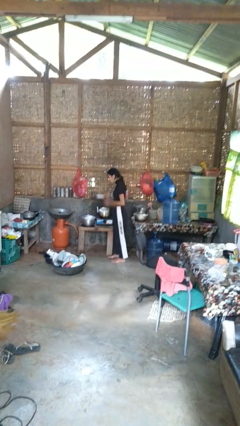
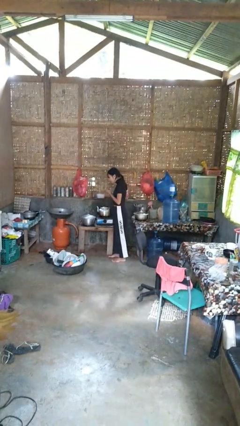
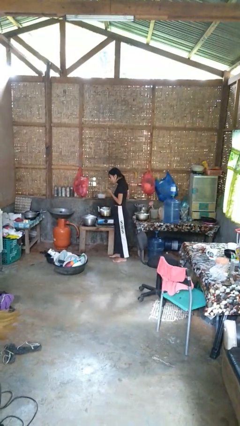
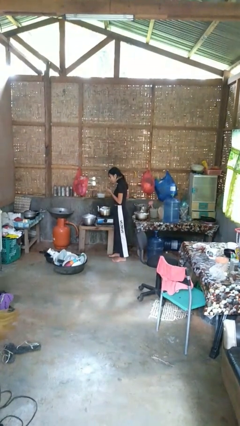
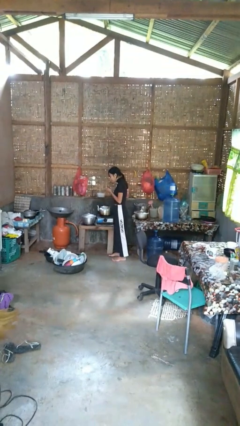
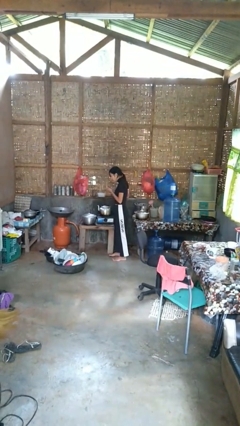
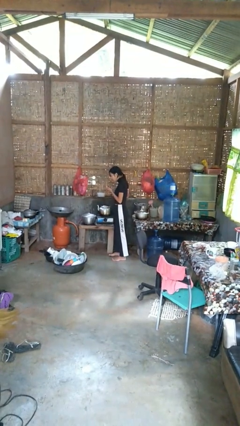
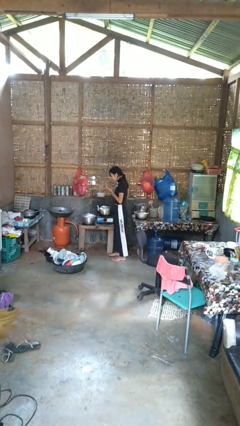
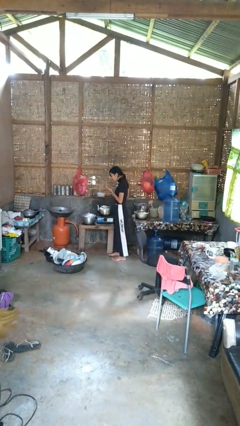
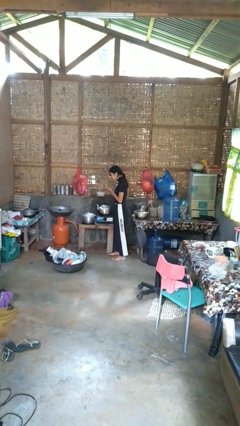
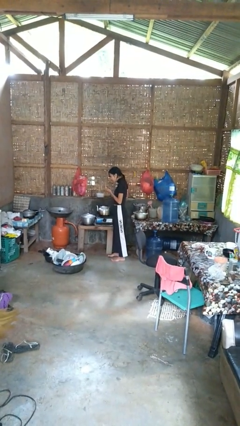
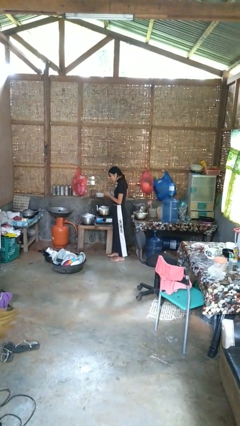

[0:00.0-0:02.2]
person burns hand

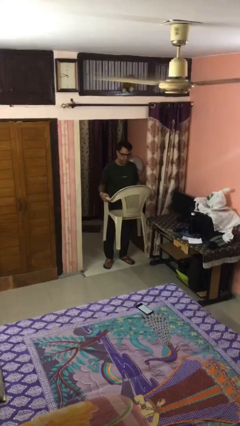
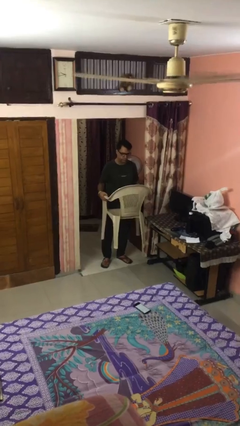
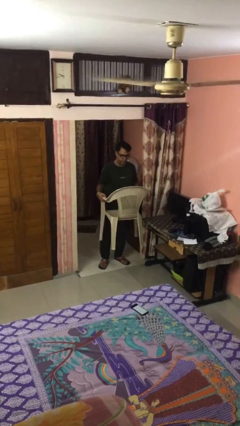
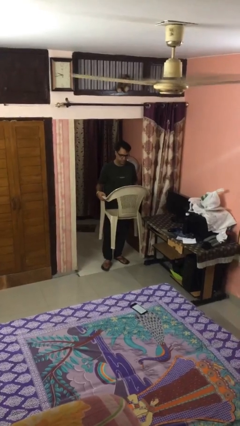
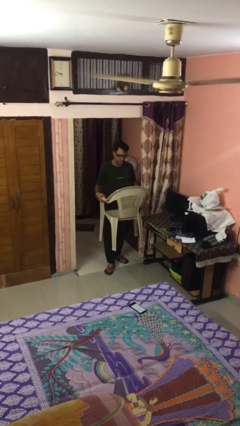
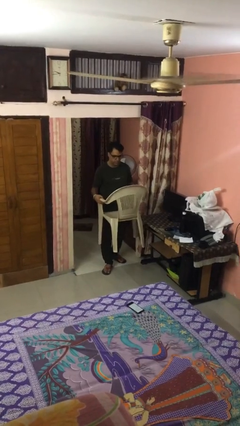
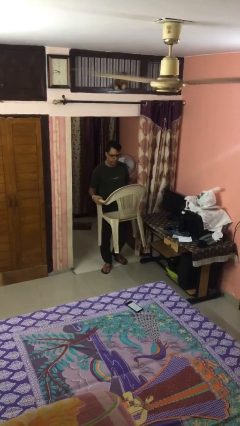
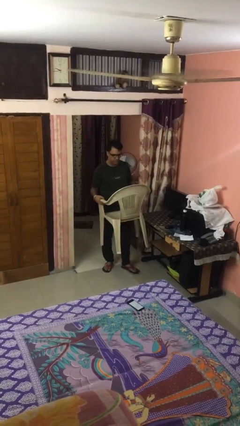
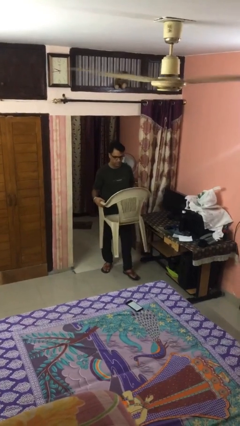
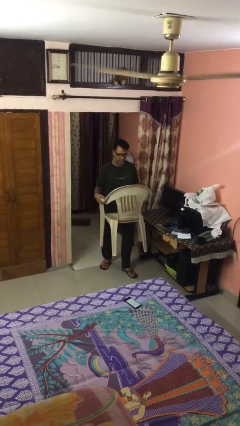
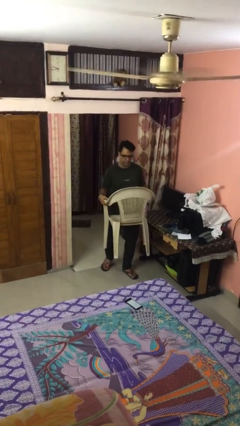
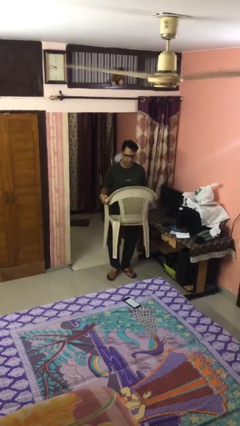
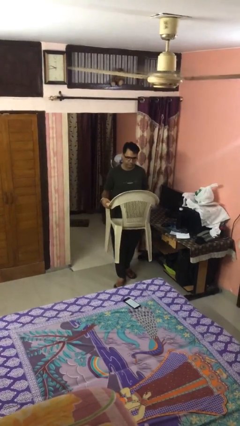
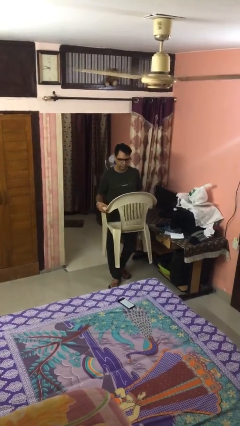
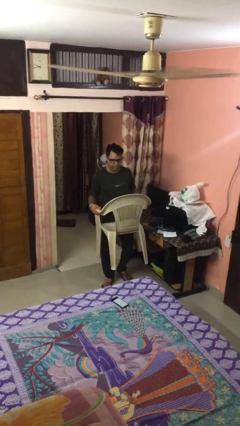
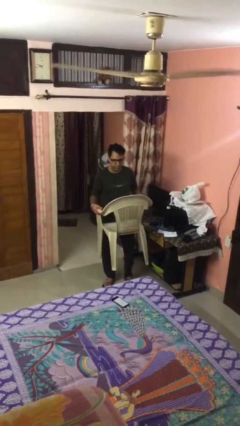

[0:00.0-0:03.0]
person carries furniture

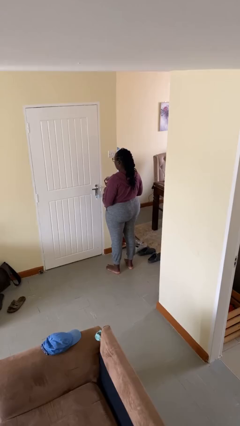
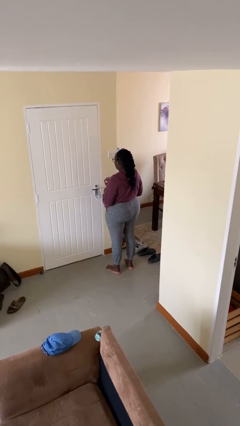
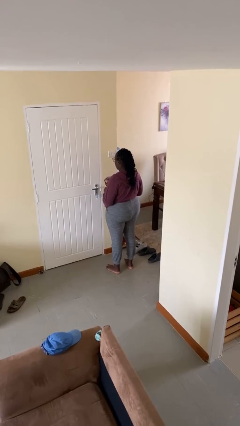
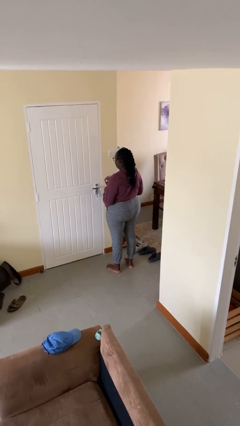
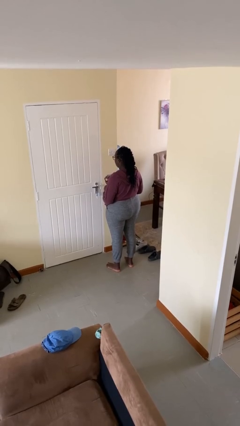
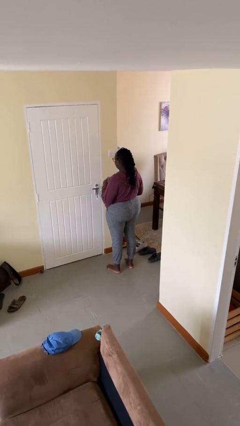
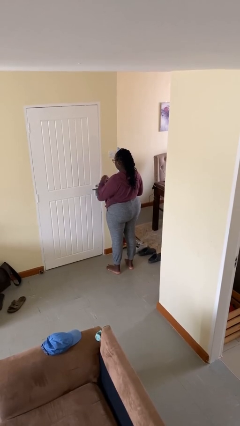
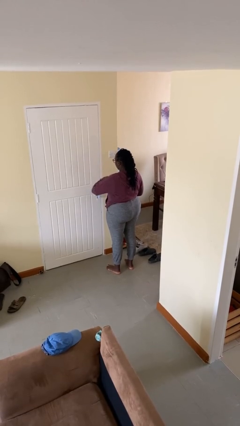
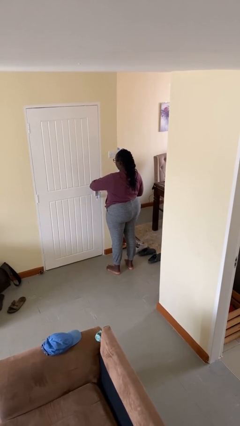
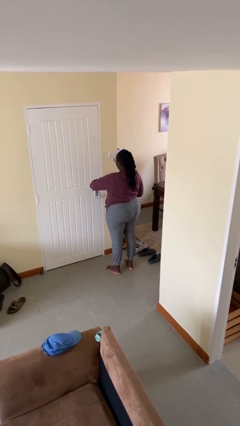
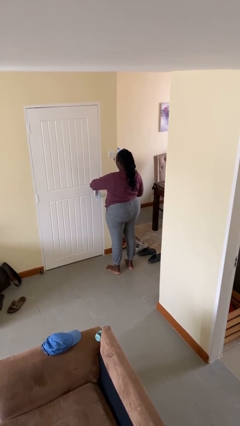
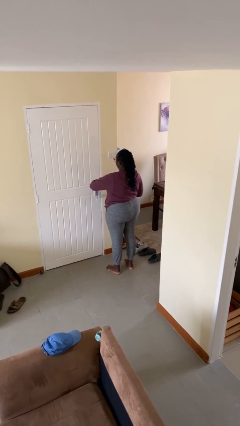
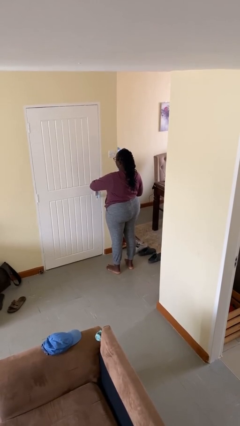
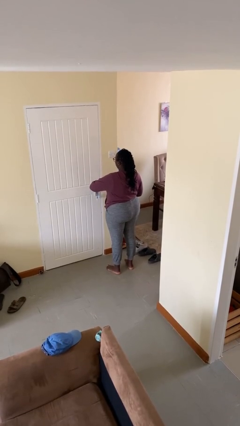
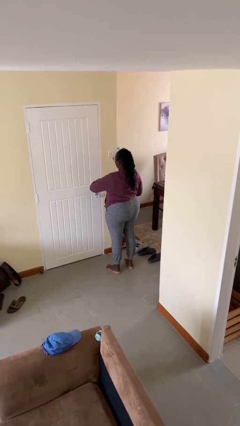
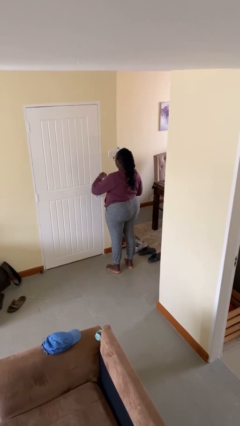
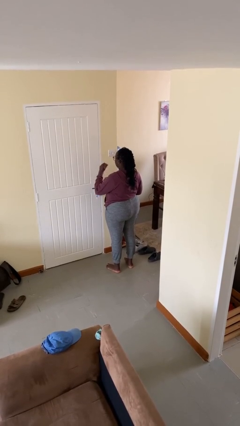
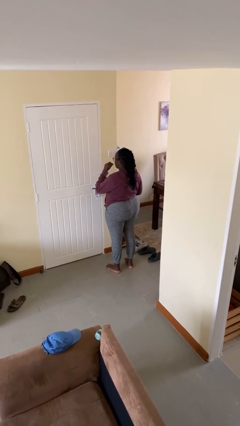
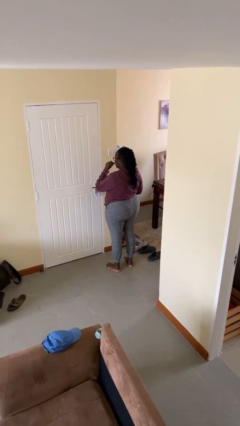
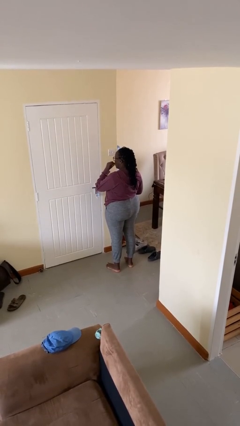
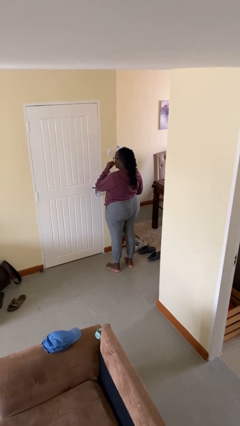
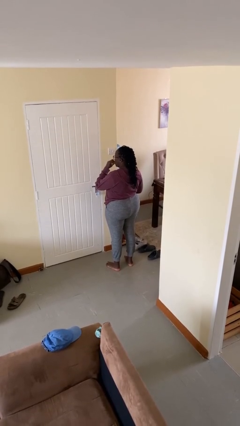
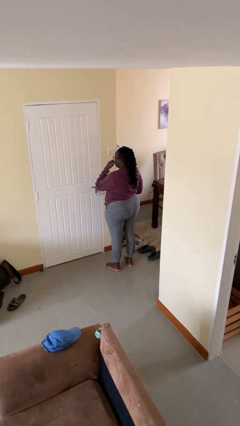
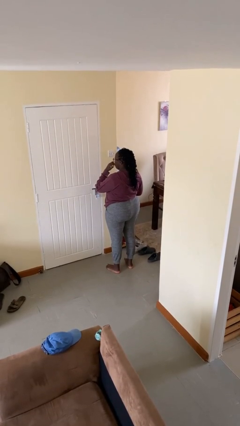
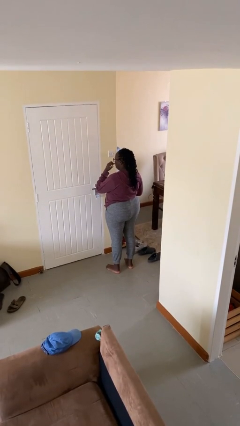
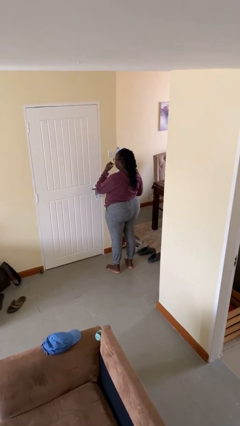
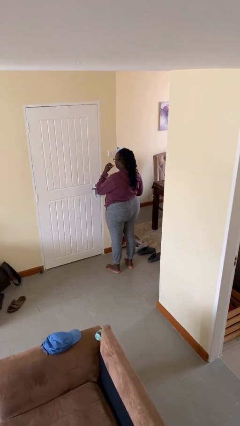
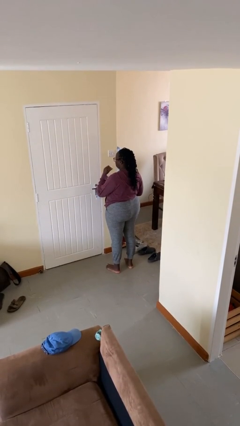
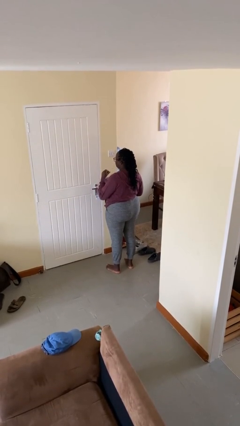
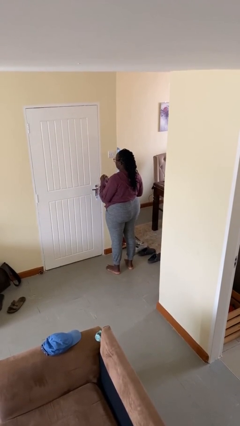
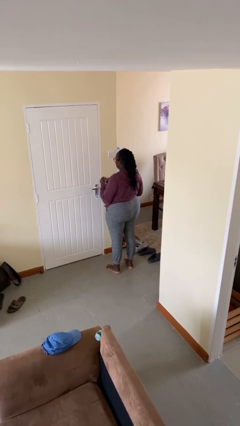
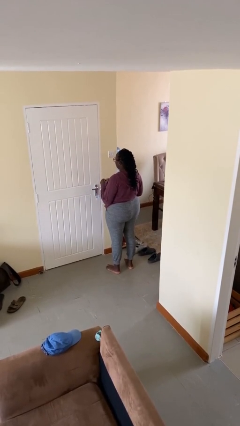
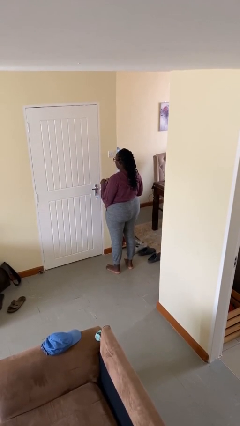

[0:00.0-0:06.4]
person eats snack from bag

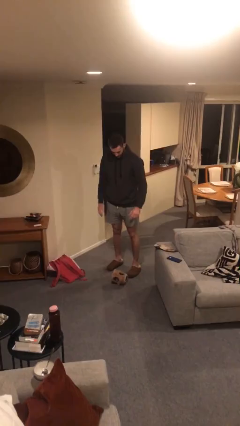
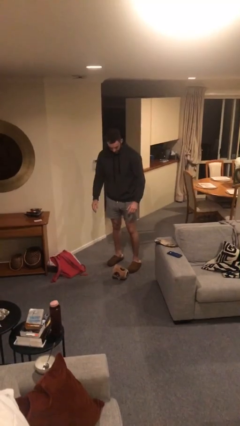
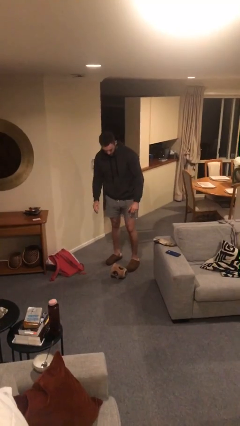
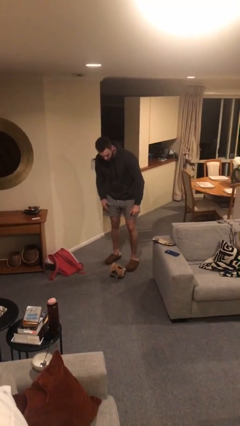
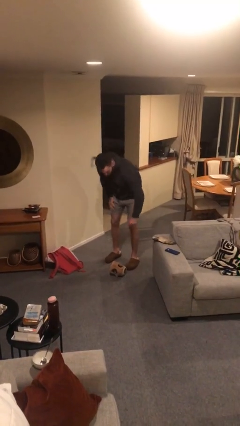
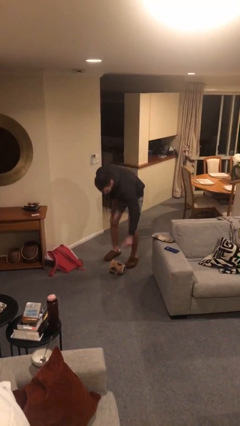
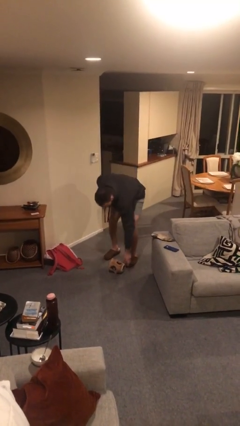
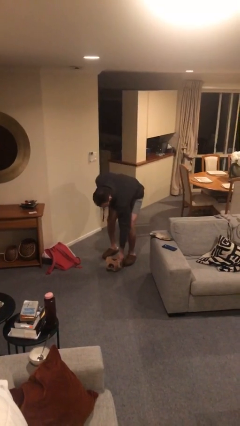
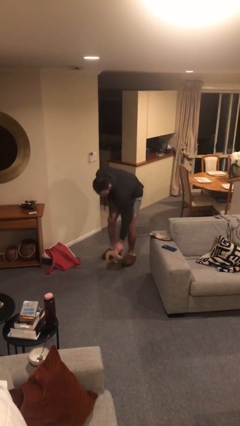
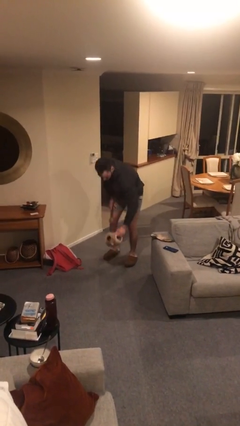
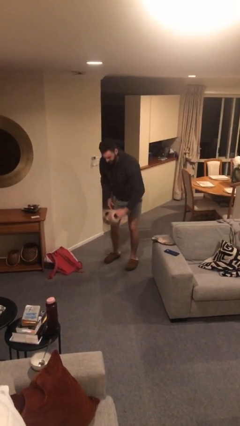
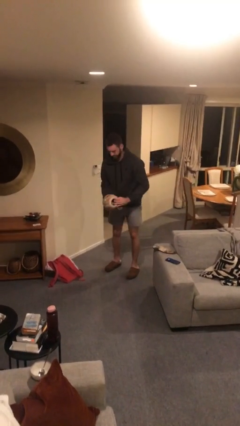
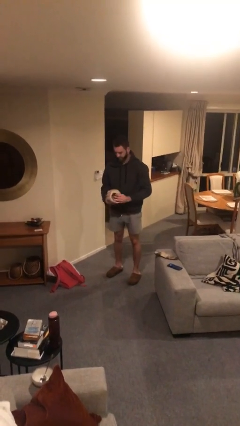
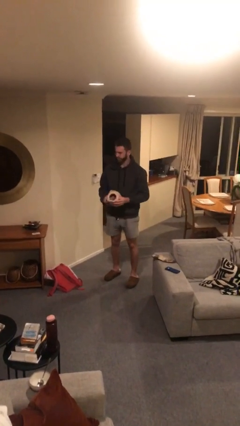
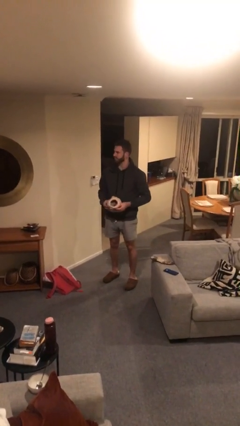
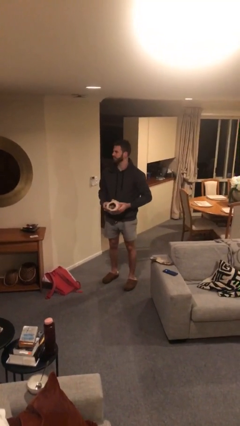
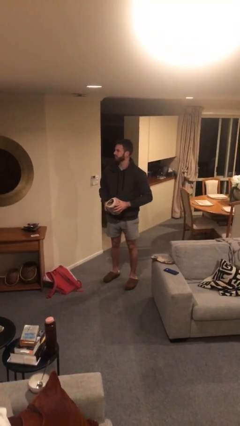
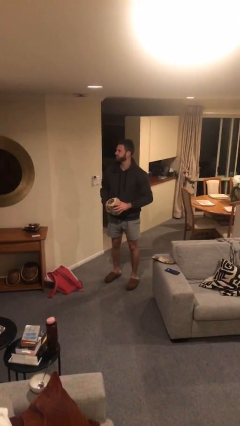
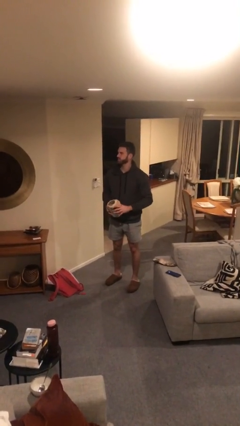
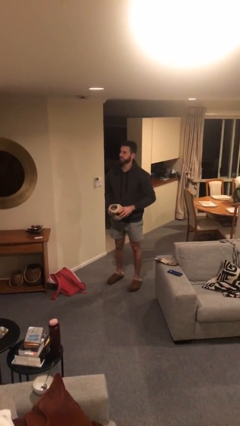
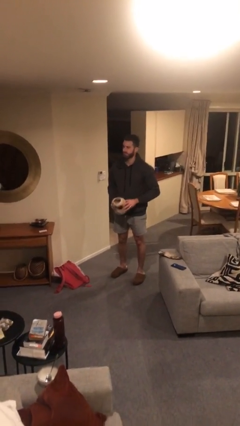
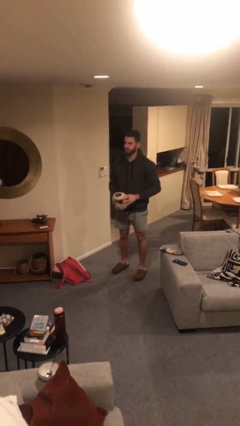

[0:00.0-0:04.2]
person picks up object from floor

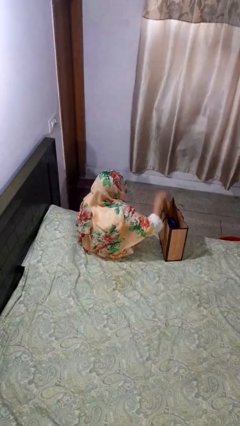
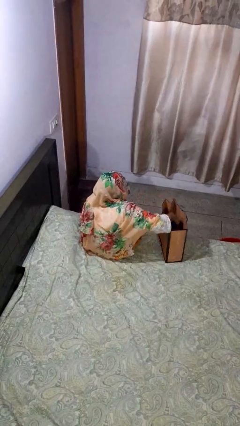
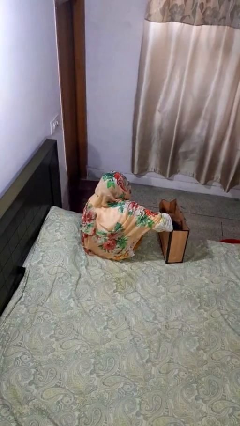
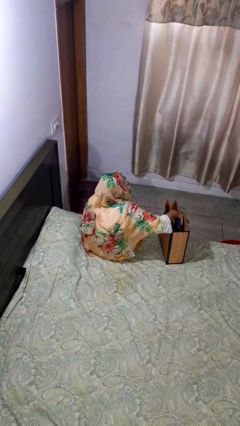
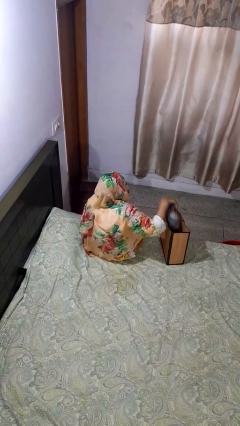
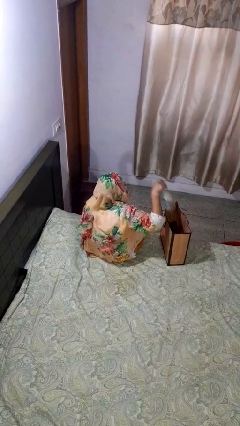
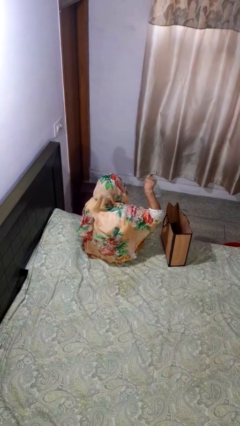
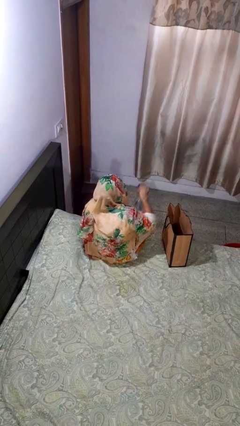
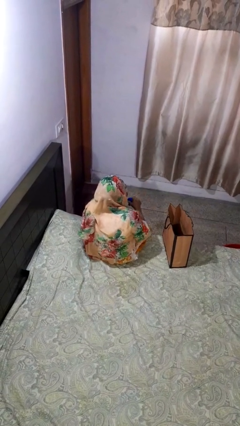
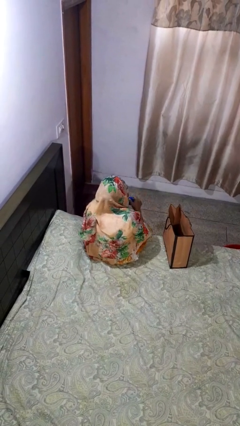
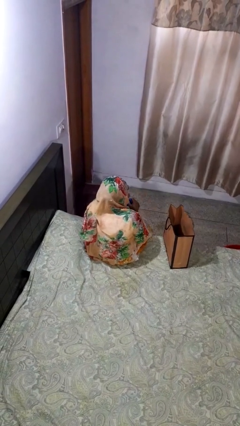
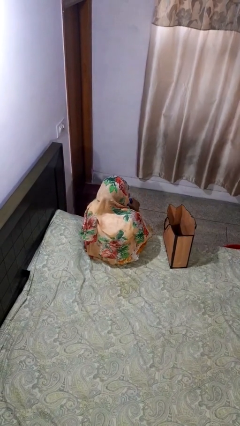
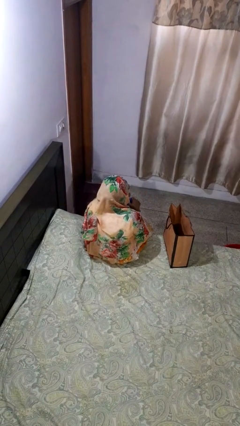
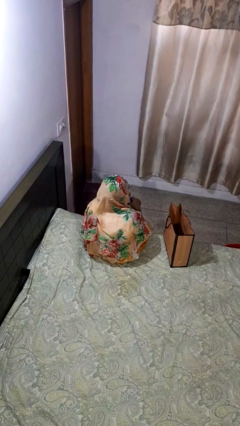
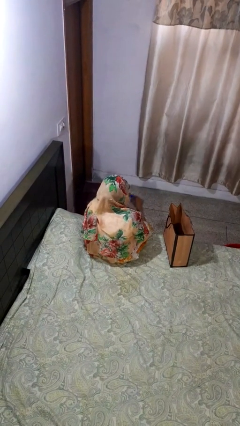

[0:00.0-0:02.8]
person takes object from bag
